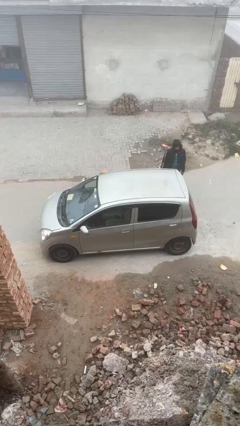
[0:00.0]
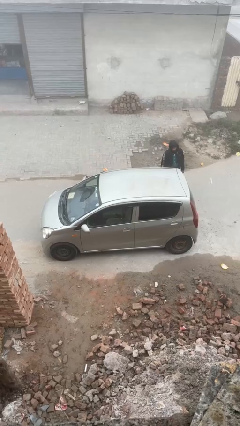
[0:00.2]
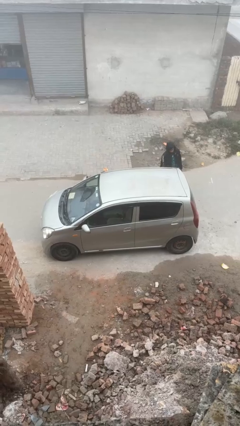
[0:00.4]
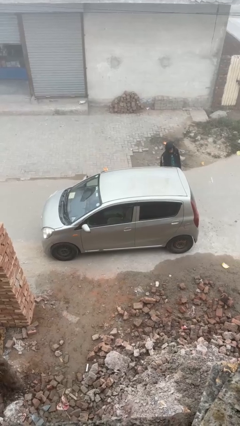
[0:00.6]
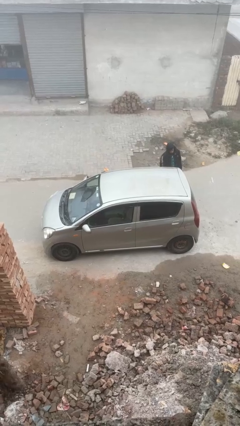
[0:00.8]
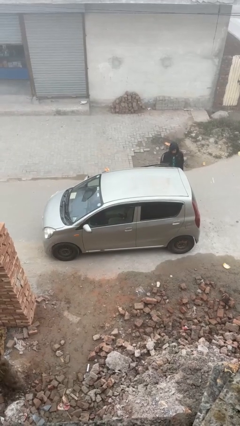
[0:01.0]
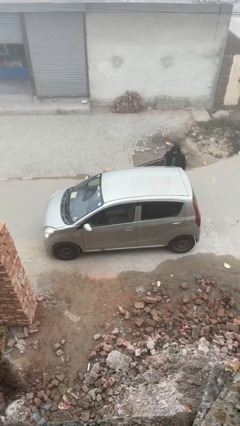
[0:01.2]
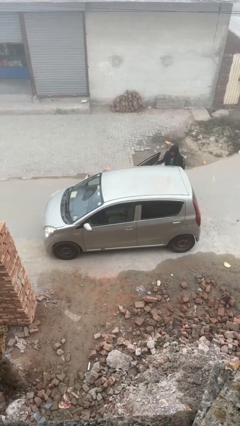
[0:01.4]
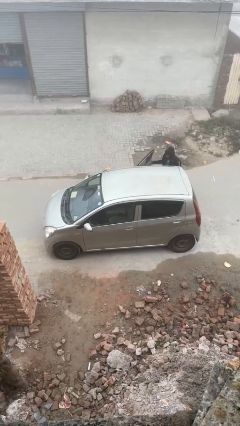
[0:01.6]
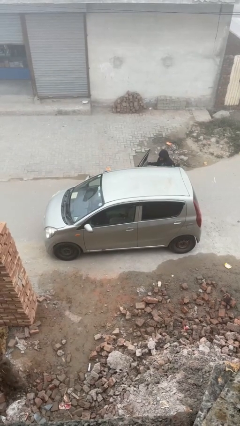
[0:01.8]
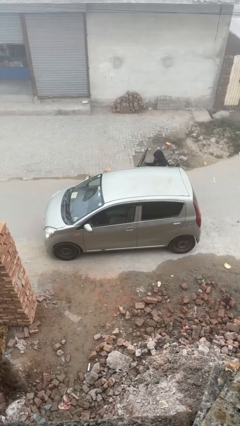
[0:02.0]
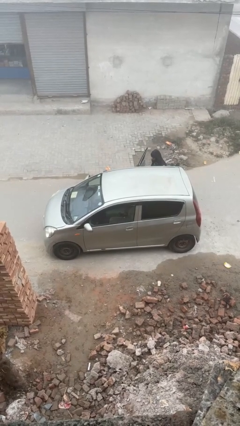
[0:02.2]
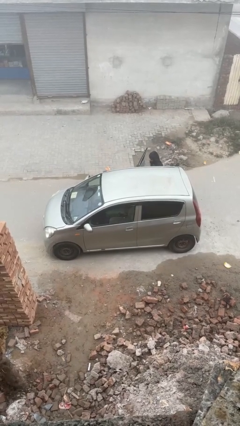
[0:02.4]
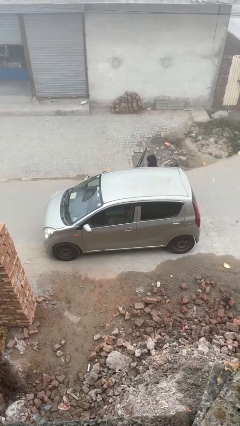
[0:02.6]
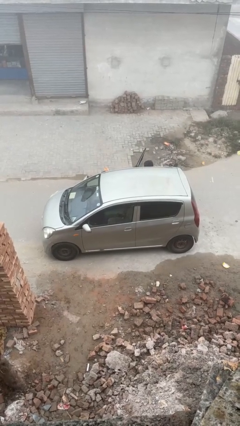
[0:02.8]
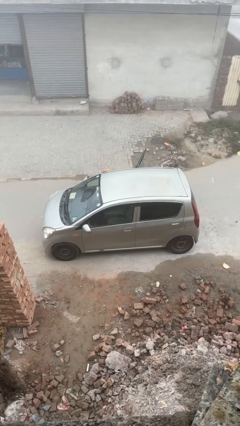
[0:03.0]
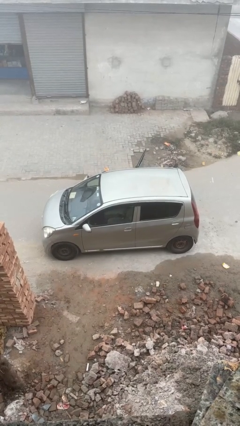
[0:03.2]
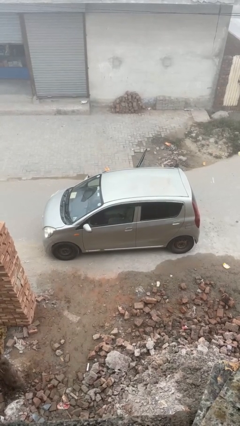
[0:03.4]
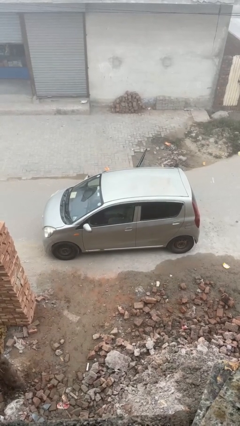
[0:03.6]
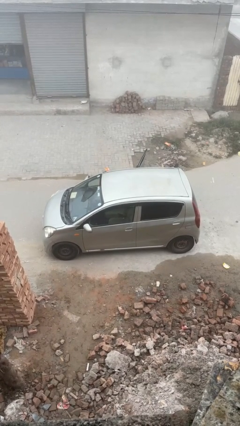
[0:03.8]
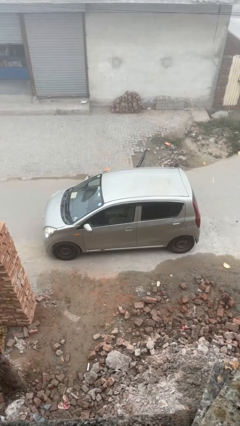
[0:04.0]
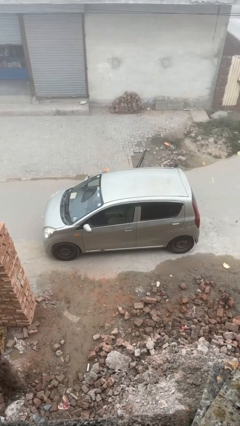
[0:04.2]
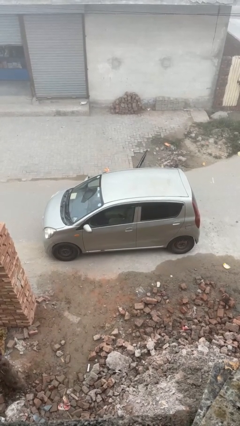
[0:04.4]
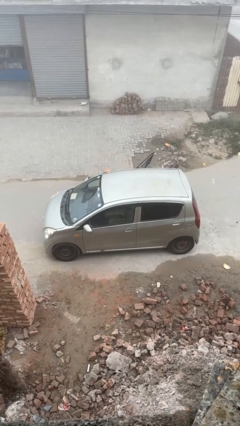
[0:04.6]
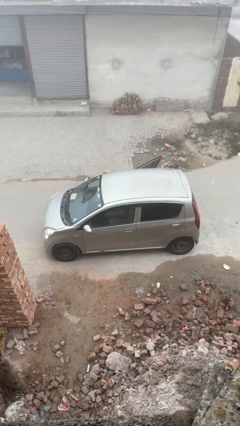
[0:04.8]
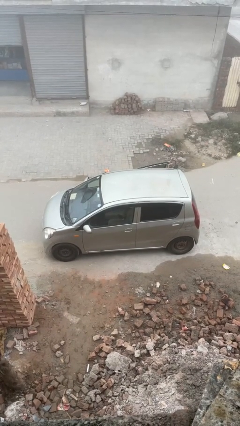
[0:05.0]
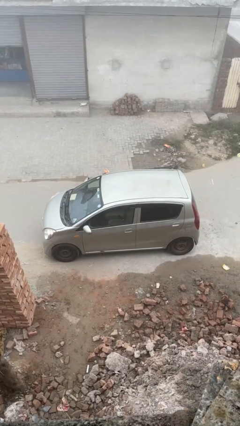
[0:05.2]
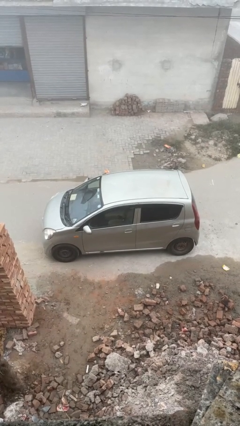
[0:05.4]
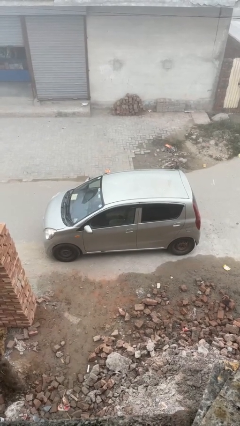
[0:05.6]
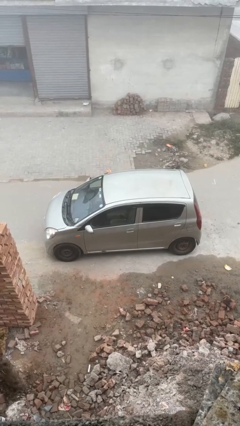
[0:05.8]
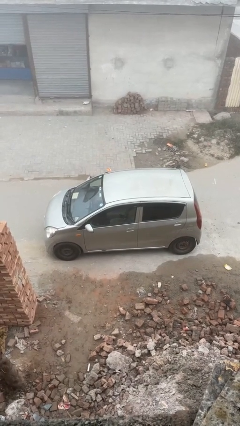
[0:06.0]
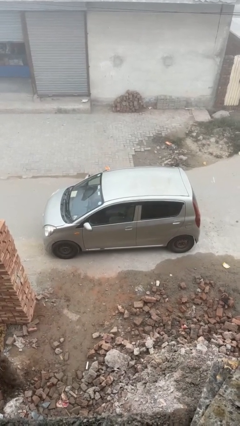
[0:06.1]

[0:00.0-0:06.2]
car picks up person

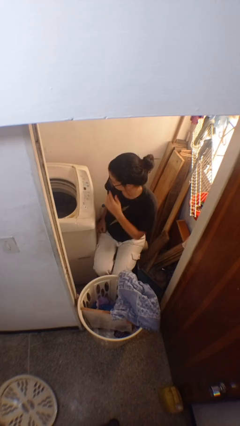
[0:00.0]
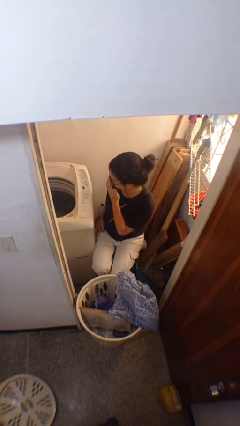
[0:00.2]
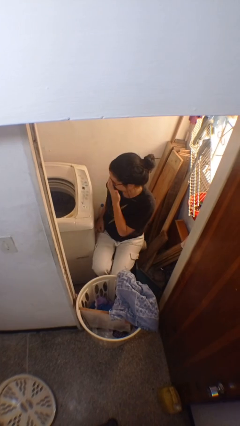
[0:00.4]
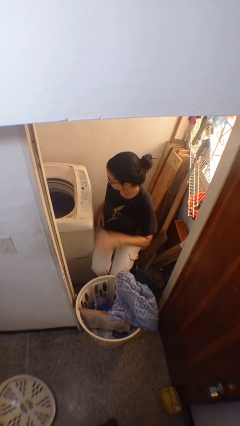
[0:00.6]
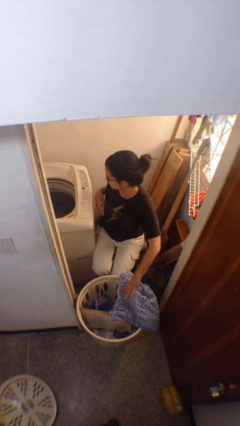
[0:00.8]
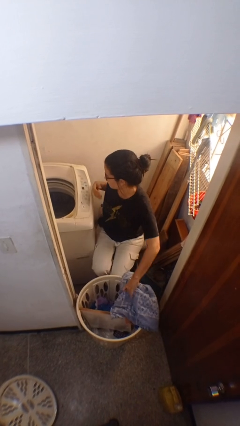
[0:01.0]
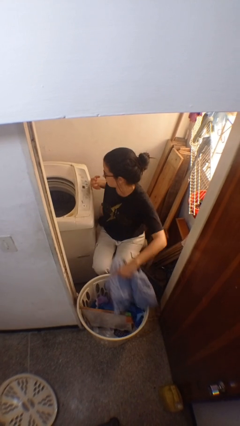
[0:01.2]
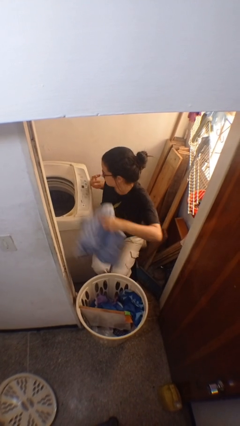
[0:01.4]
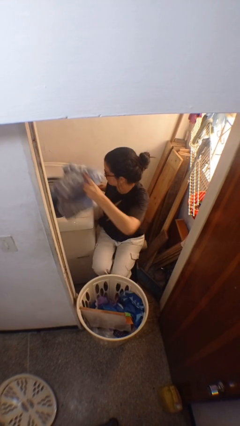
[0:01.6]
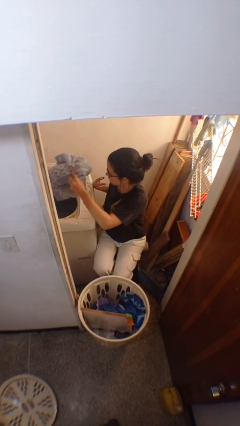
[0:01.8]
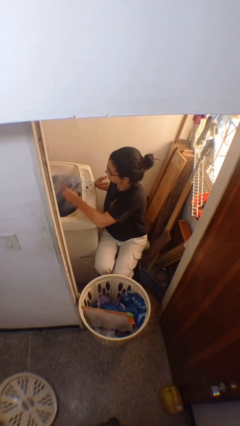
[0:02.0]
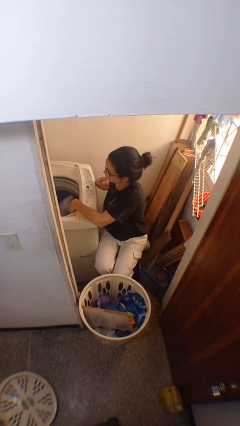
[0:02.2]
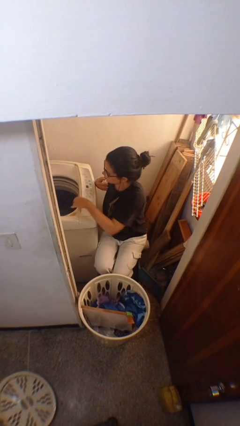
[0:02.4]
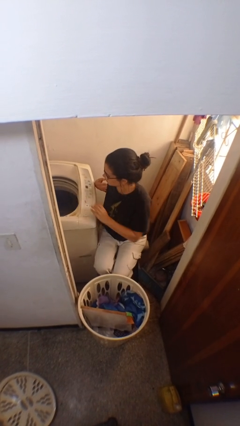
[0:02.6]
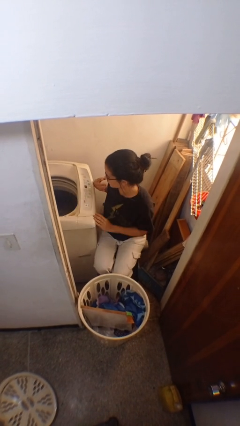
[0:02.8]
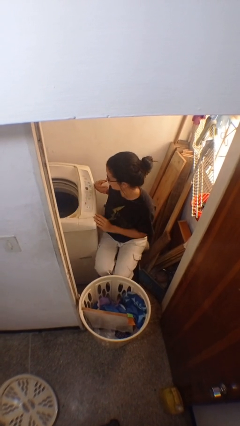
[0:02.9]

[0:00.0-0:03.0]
person loads clotheswasher

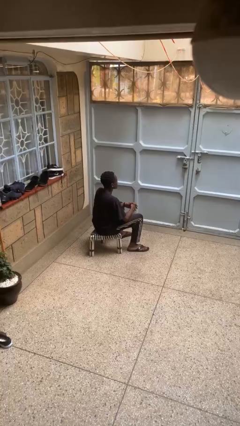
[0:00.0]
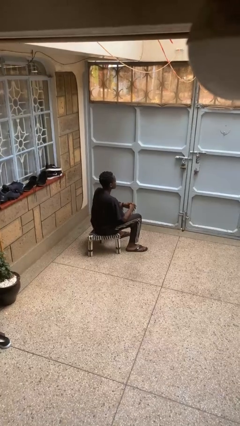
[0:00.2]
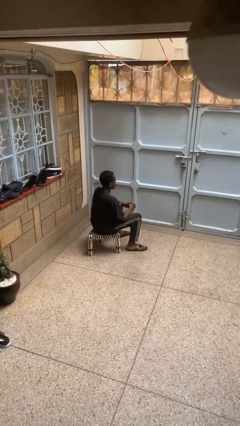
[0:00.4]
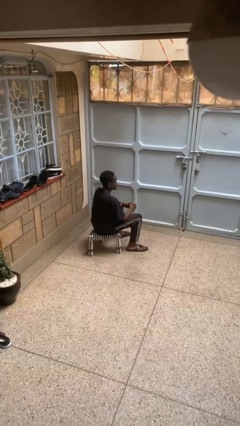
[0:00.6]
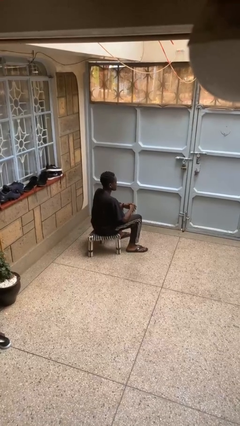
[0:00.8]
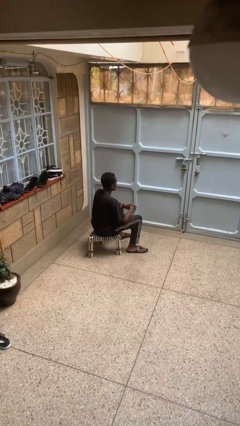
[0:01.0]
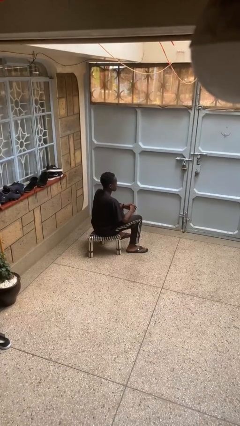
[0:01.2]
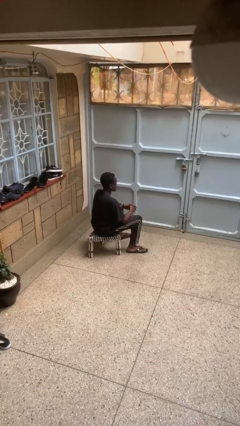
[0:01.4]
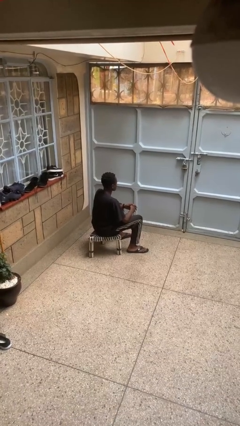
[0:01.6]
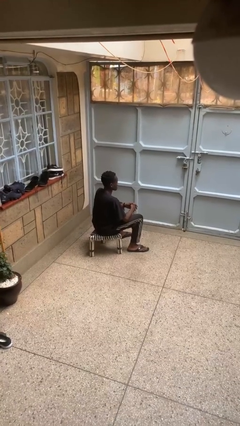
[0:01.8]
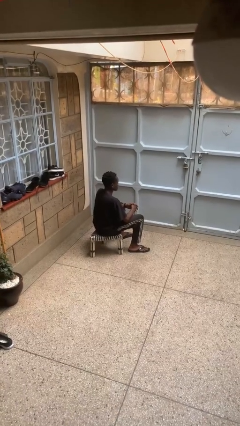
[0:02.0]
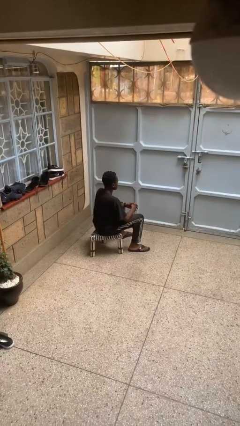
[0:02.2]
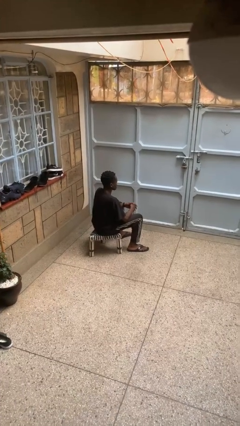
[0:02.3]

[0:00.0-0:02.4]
person shakes head

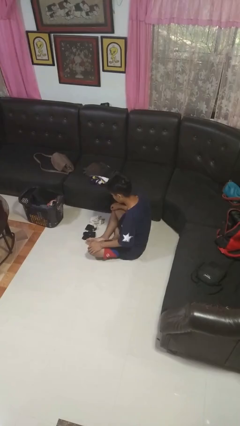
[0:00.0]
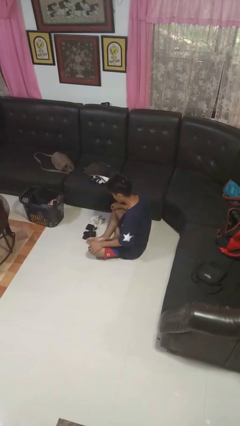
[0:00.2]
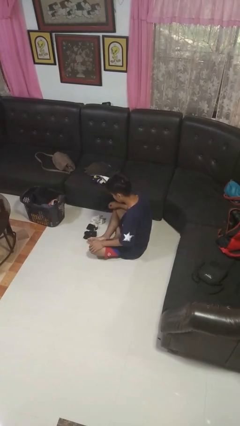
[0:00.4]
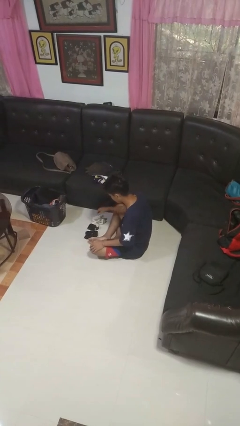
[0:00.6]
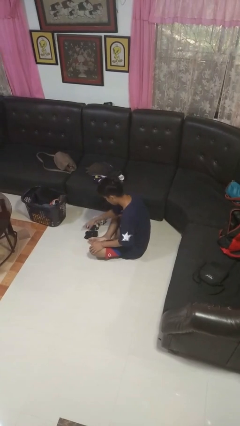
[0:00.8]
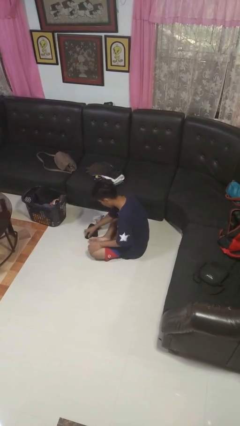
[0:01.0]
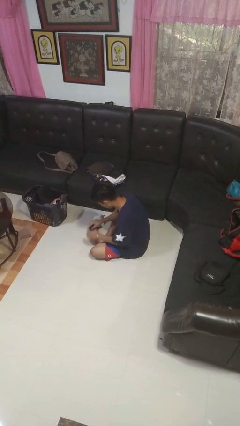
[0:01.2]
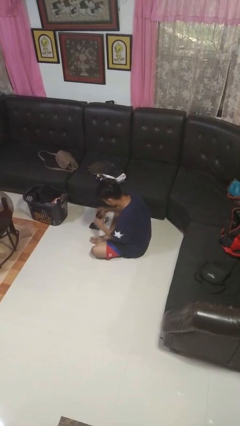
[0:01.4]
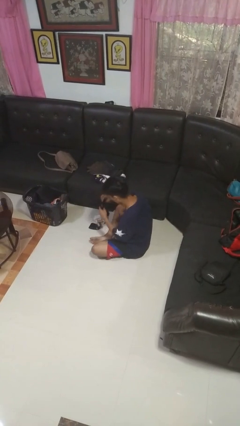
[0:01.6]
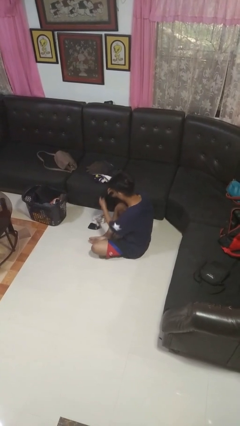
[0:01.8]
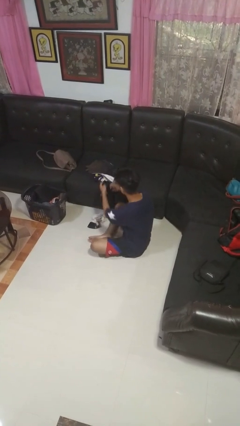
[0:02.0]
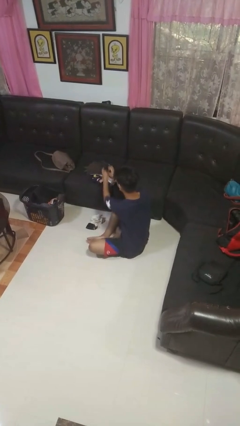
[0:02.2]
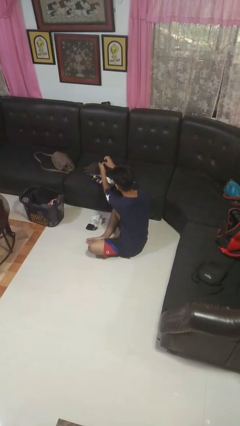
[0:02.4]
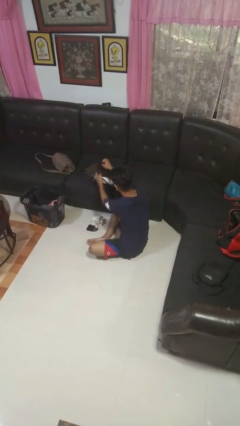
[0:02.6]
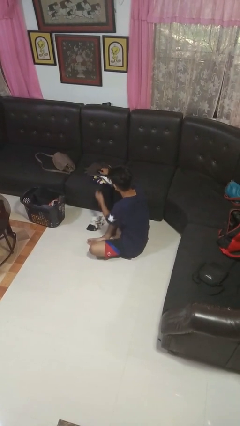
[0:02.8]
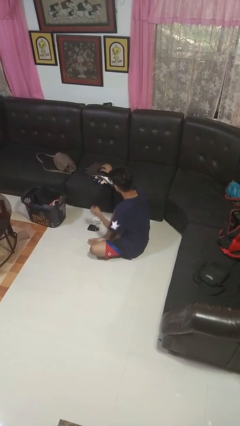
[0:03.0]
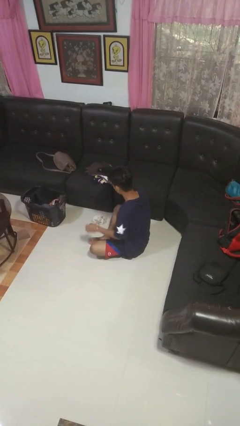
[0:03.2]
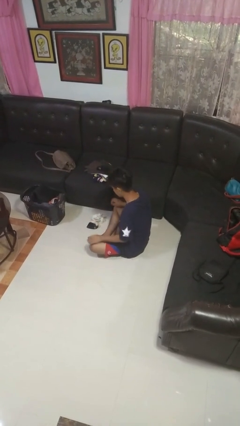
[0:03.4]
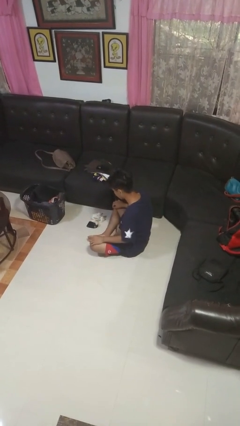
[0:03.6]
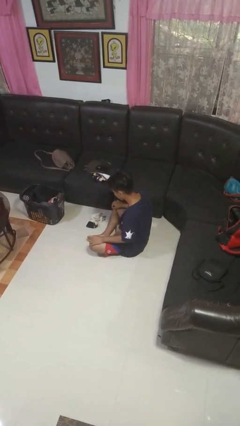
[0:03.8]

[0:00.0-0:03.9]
person folds socks

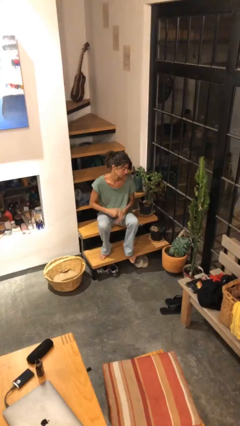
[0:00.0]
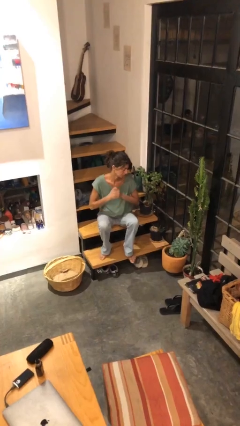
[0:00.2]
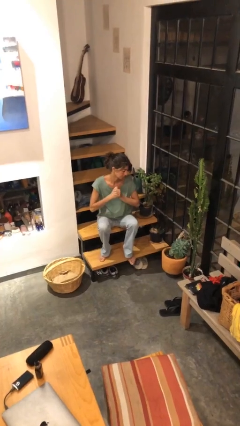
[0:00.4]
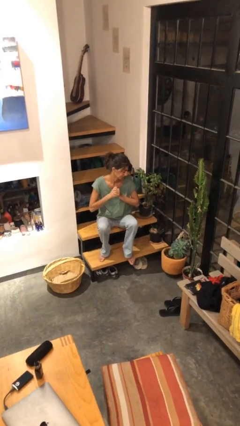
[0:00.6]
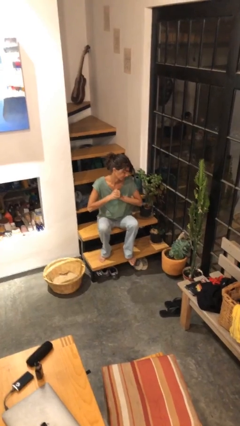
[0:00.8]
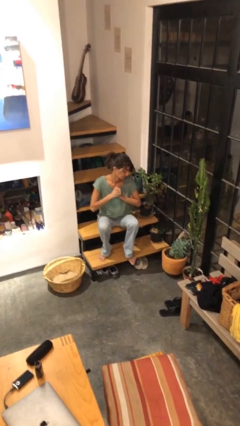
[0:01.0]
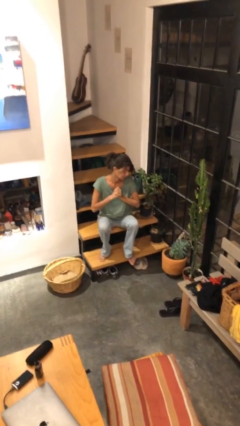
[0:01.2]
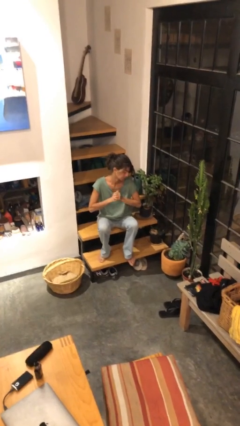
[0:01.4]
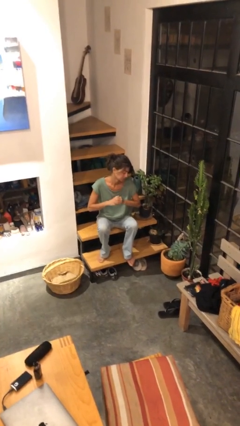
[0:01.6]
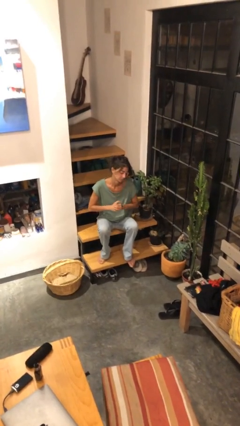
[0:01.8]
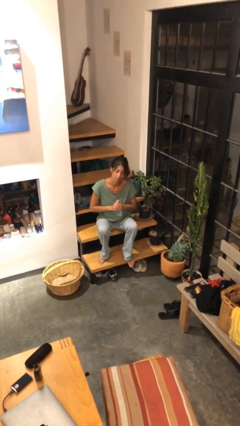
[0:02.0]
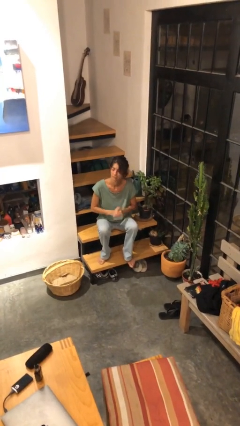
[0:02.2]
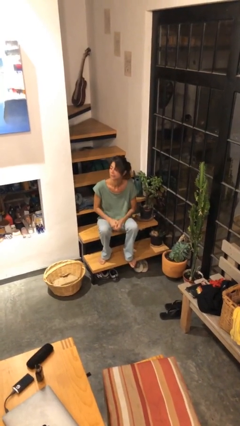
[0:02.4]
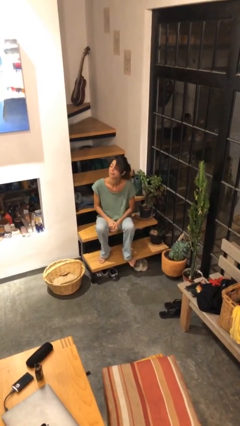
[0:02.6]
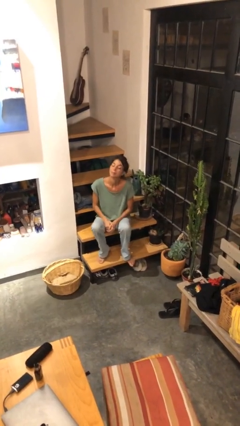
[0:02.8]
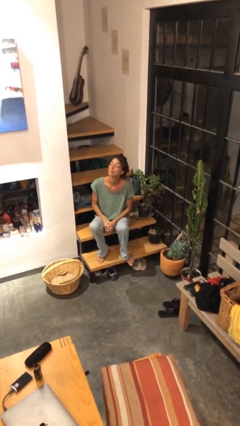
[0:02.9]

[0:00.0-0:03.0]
person cracks knuckles
